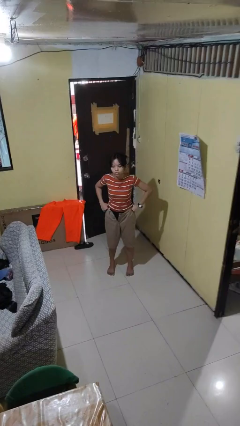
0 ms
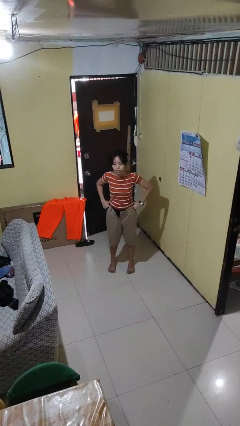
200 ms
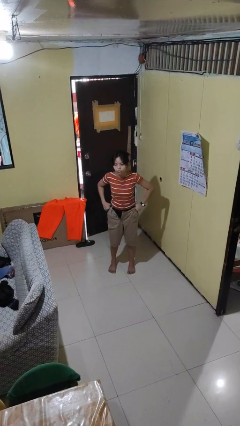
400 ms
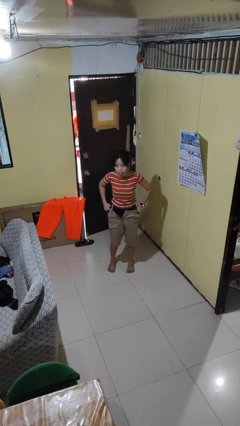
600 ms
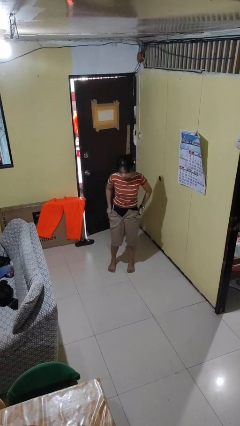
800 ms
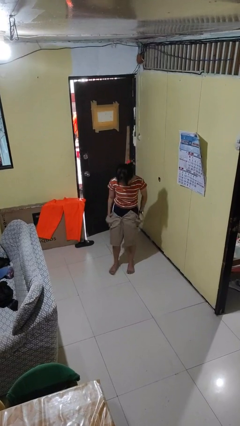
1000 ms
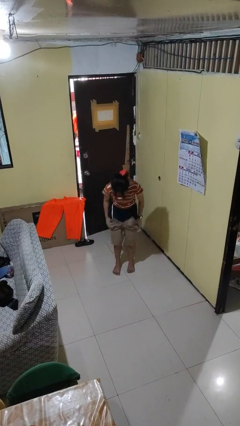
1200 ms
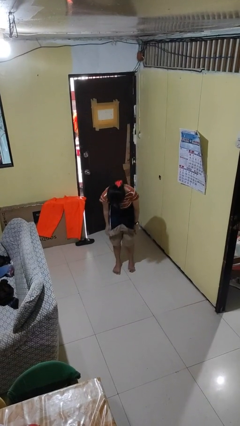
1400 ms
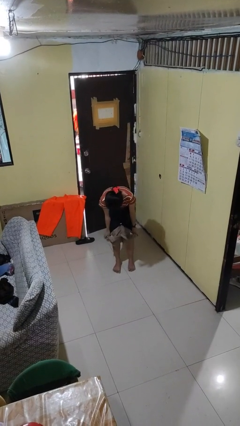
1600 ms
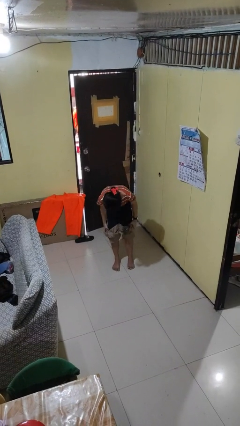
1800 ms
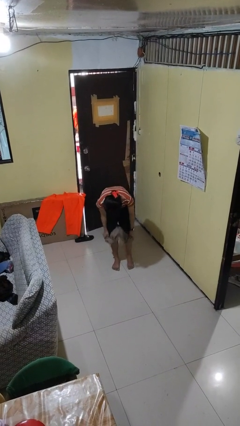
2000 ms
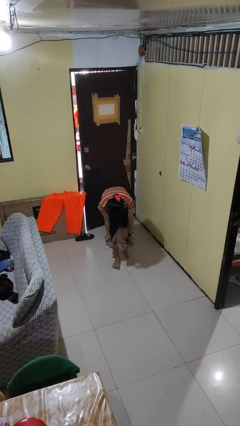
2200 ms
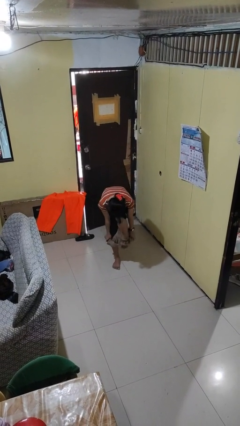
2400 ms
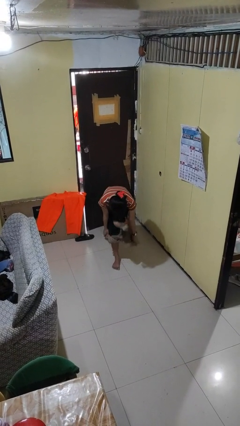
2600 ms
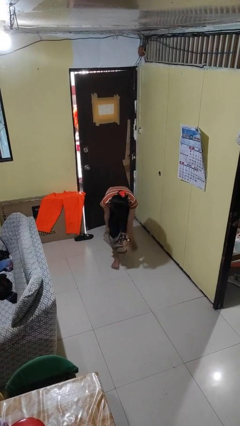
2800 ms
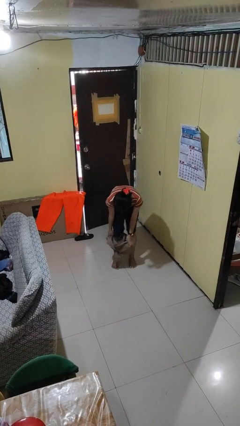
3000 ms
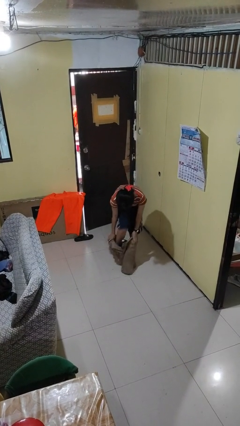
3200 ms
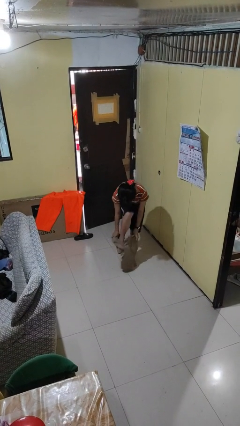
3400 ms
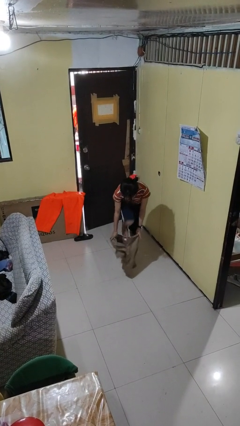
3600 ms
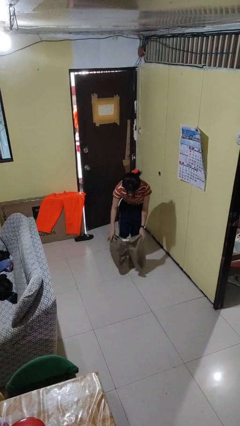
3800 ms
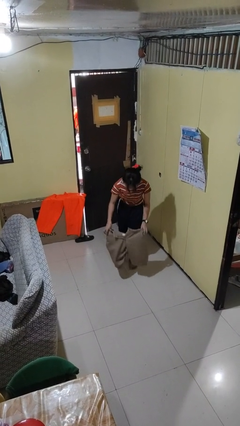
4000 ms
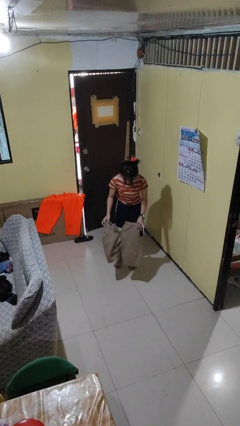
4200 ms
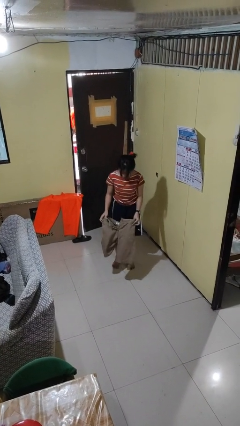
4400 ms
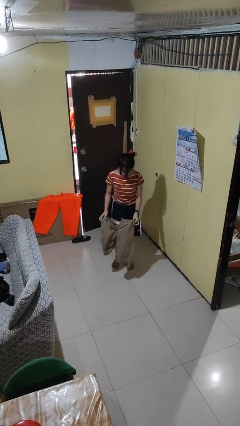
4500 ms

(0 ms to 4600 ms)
person takes off pants

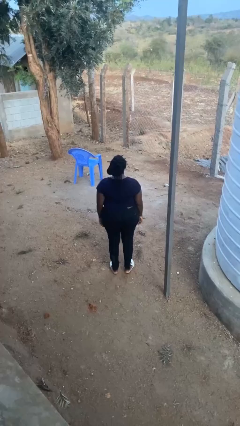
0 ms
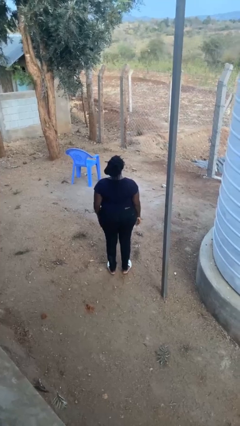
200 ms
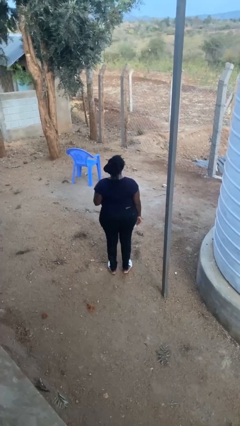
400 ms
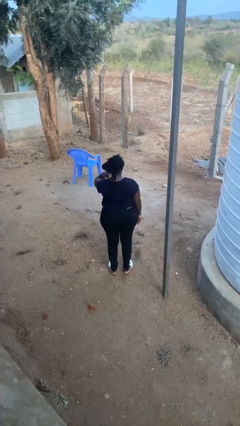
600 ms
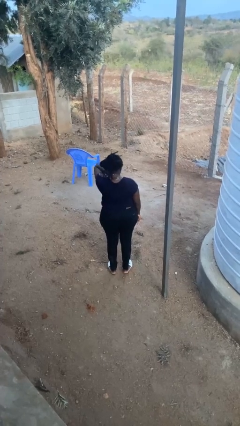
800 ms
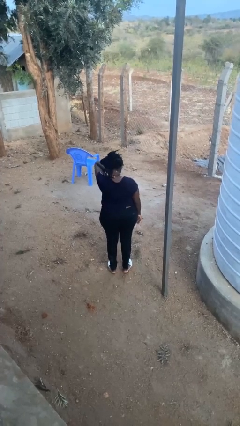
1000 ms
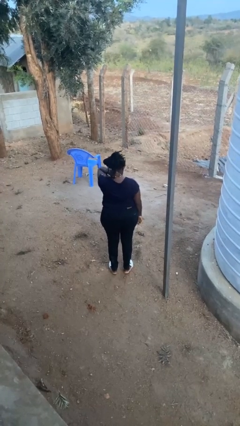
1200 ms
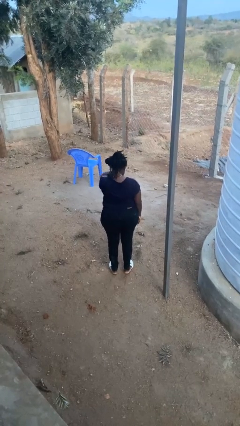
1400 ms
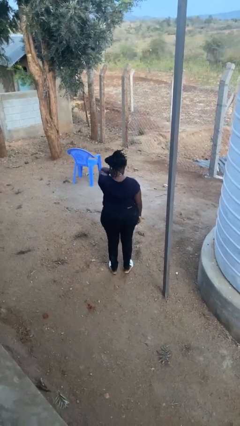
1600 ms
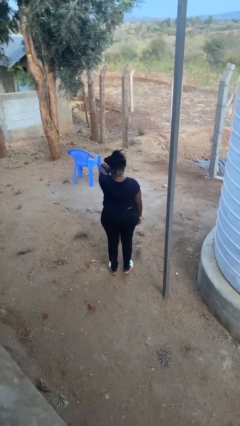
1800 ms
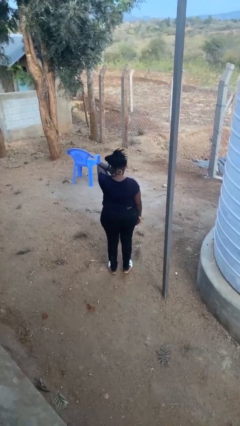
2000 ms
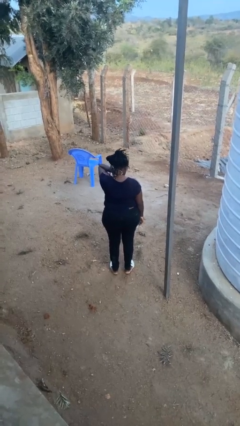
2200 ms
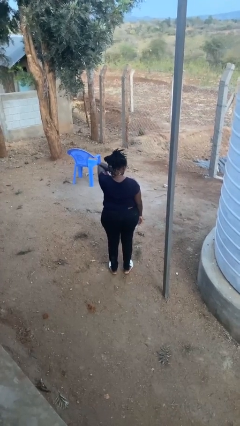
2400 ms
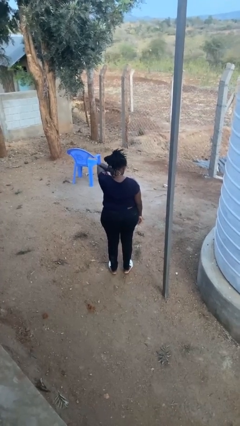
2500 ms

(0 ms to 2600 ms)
person rubs neck

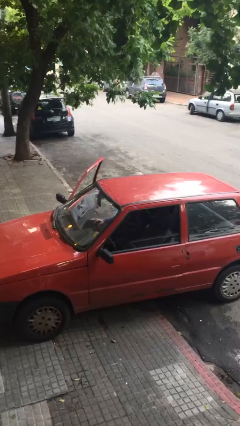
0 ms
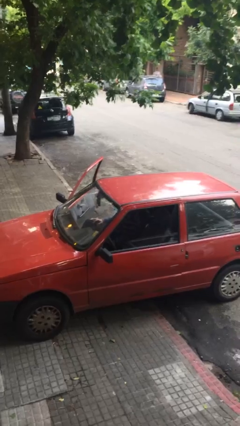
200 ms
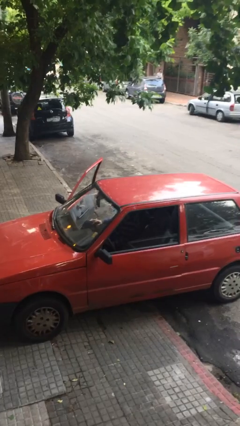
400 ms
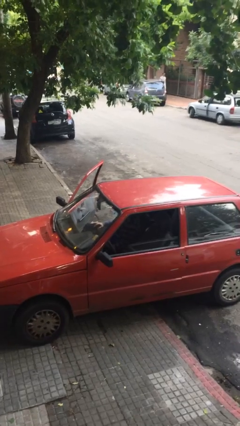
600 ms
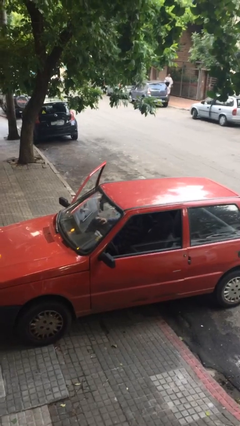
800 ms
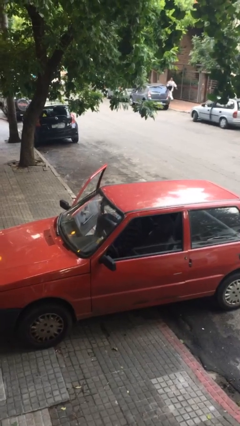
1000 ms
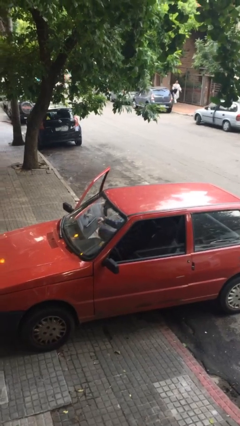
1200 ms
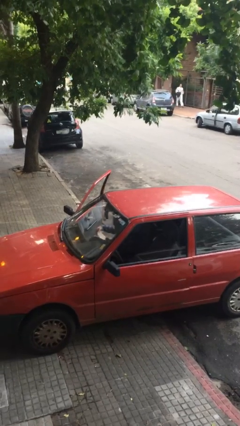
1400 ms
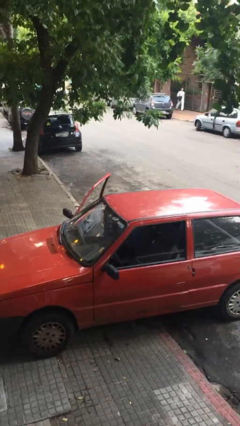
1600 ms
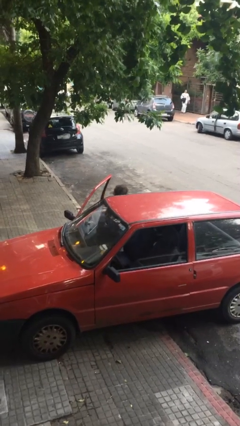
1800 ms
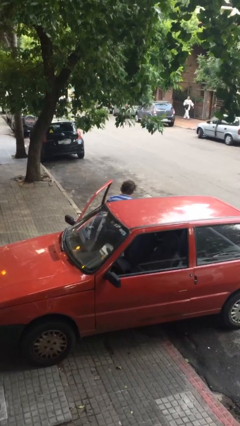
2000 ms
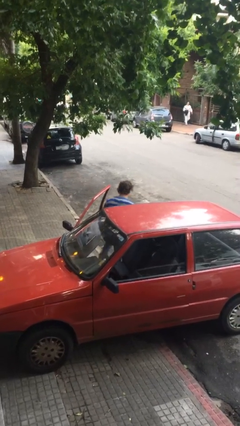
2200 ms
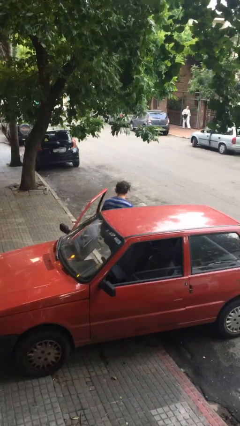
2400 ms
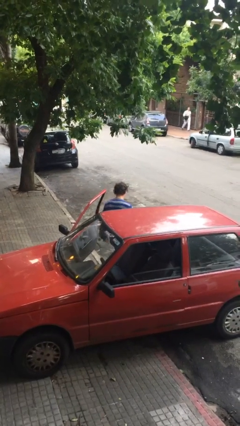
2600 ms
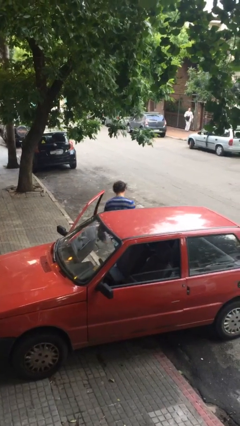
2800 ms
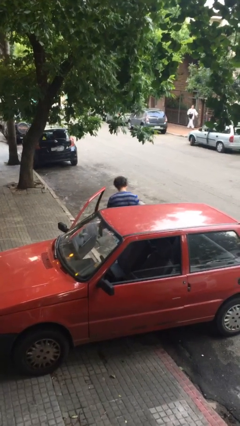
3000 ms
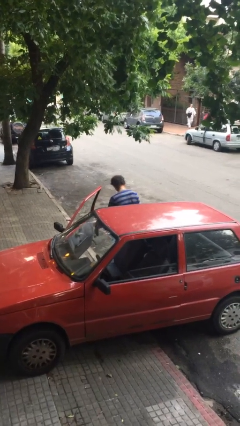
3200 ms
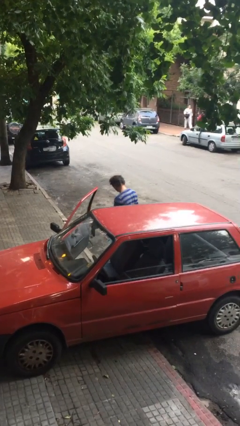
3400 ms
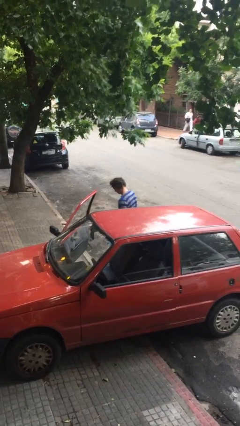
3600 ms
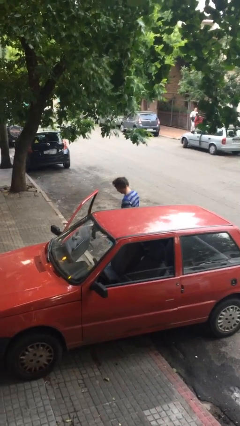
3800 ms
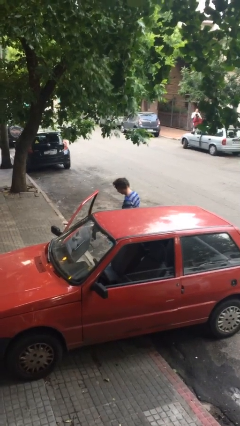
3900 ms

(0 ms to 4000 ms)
person exits car

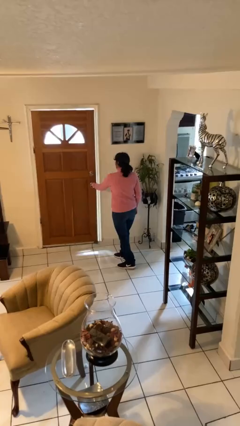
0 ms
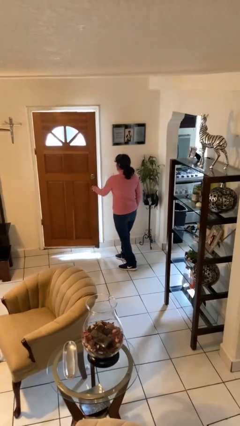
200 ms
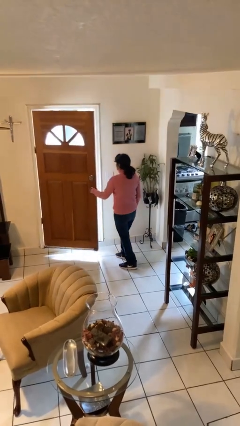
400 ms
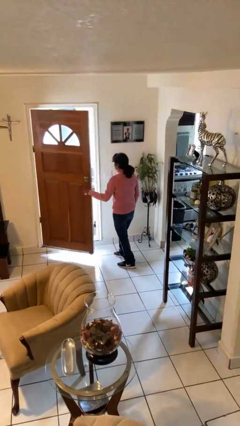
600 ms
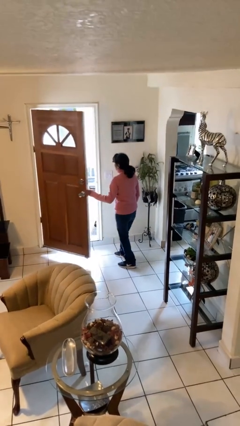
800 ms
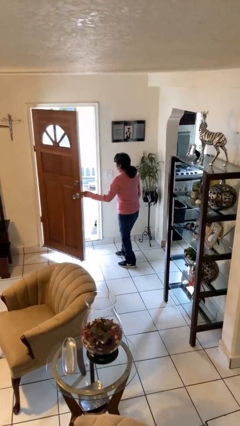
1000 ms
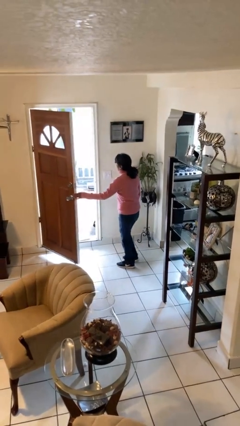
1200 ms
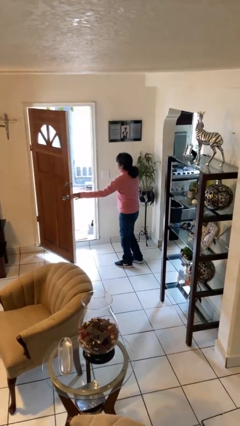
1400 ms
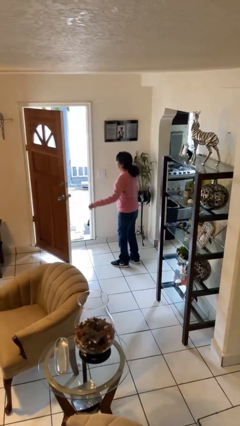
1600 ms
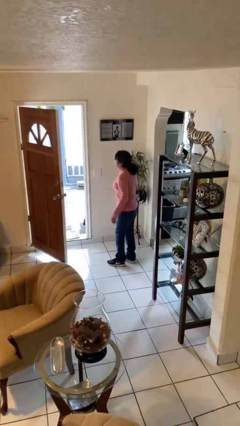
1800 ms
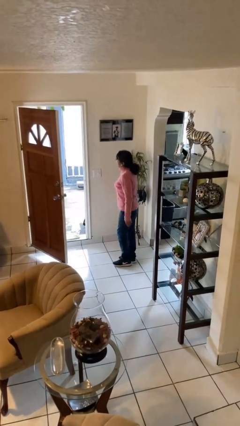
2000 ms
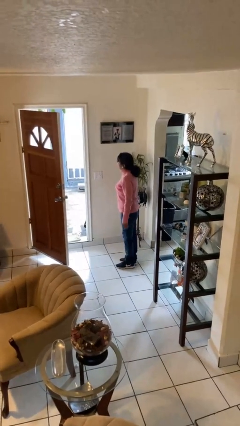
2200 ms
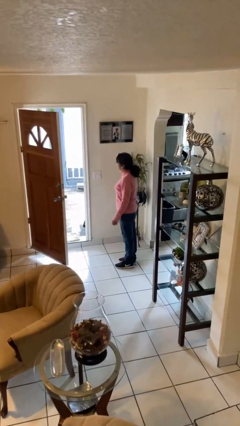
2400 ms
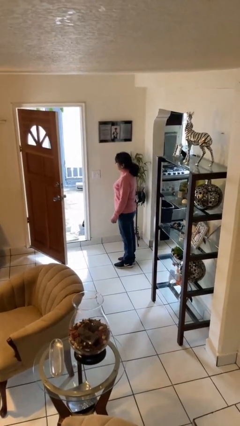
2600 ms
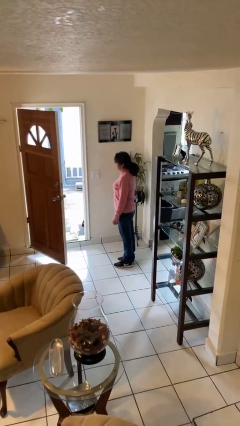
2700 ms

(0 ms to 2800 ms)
person opens facility door

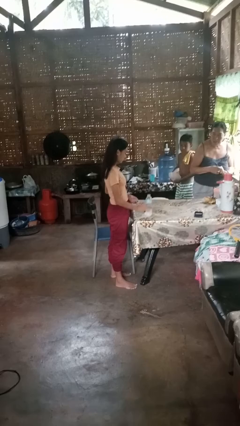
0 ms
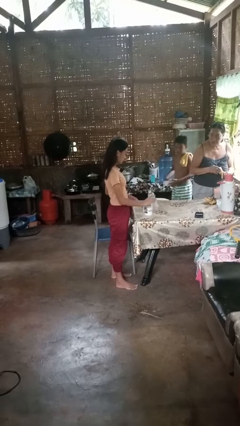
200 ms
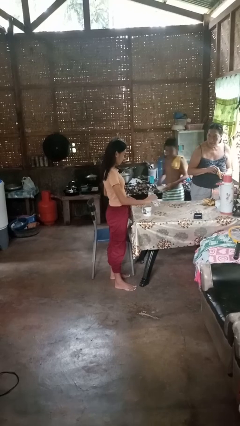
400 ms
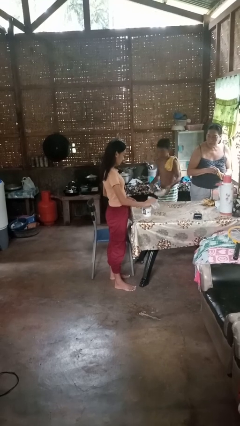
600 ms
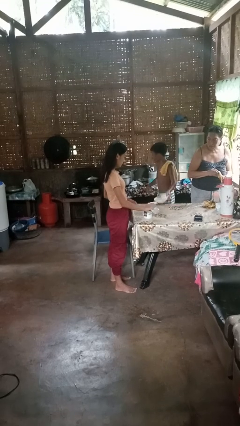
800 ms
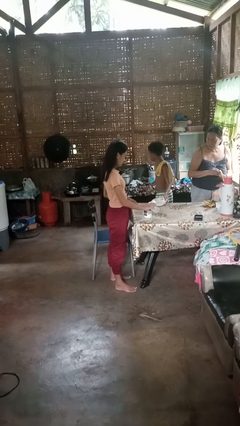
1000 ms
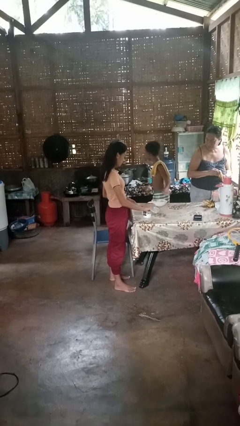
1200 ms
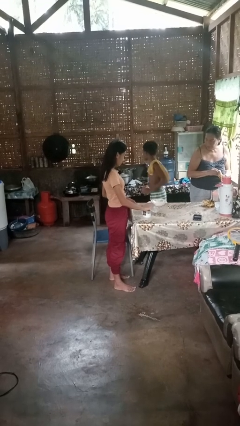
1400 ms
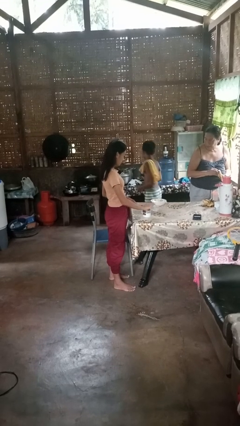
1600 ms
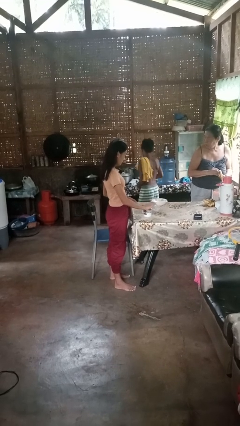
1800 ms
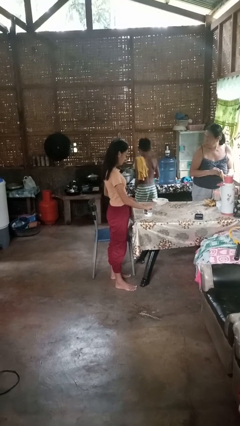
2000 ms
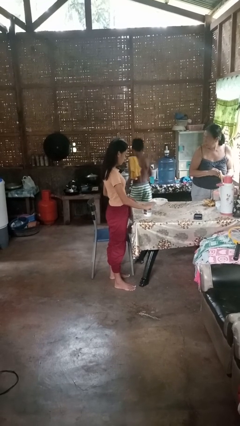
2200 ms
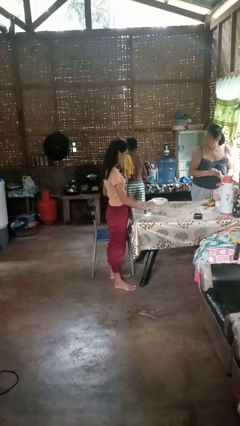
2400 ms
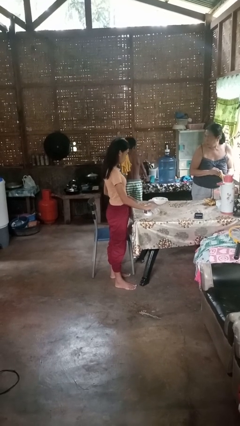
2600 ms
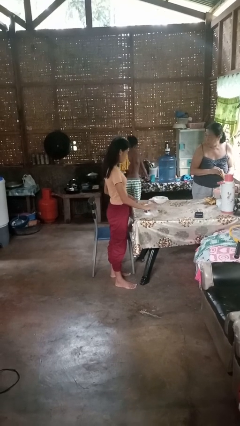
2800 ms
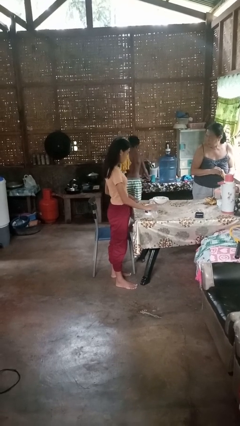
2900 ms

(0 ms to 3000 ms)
person pours liquid into cup

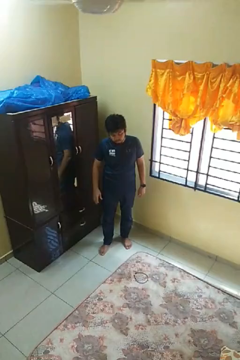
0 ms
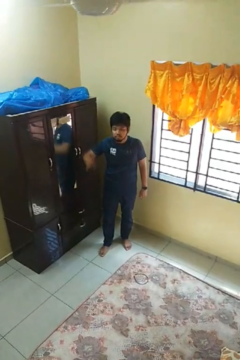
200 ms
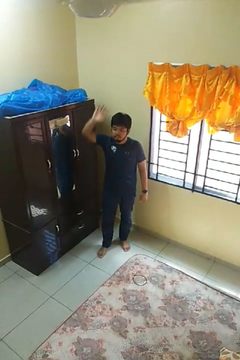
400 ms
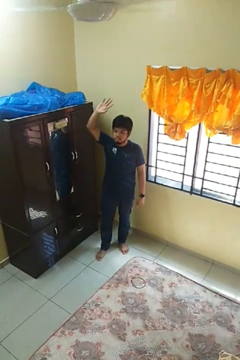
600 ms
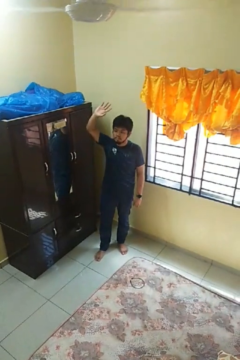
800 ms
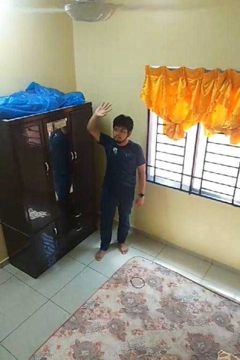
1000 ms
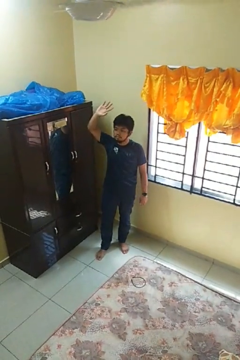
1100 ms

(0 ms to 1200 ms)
person gestures raise hand
